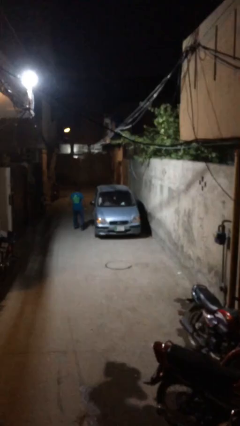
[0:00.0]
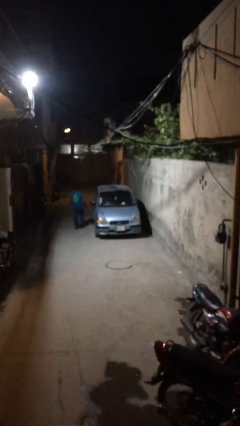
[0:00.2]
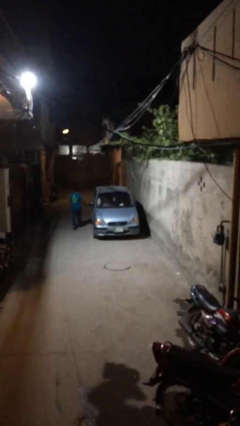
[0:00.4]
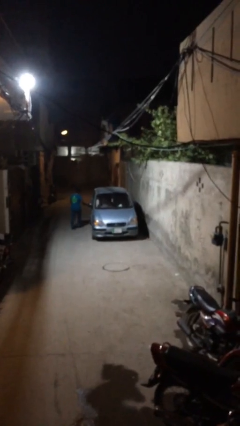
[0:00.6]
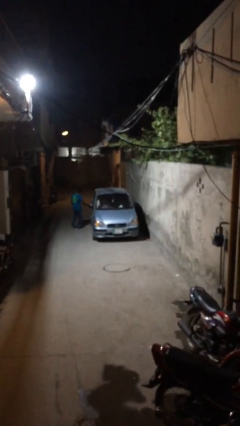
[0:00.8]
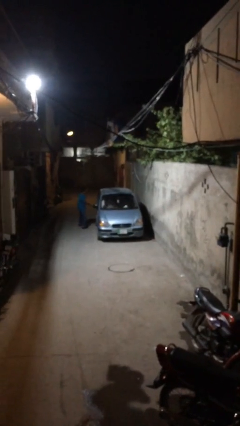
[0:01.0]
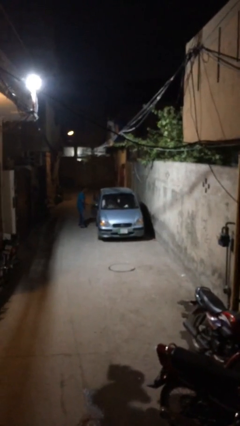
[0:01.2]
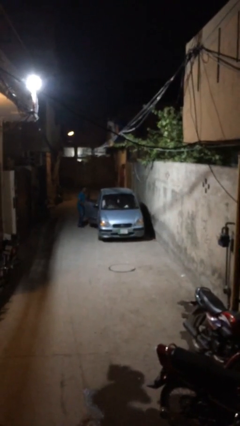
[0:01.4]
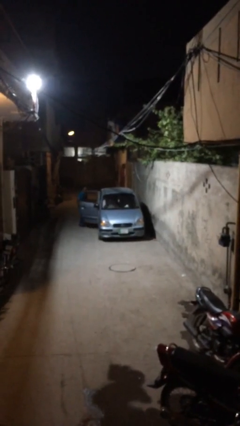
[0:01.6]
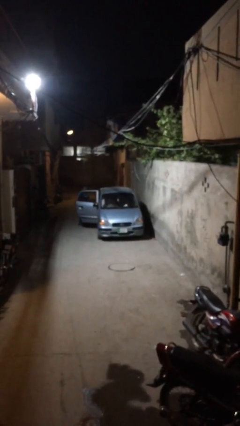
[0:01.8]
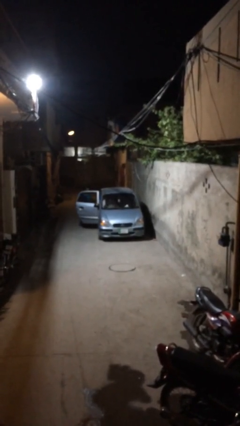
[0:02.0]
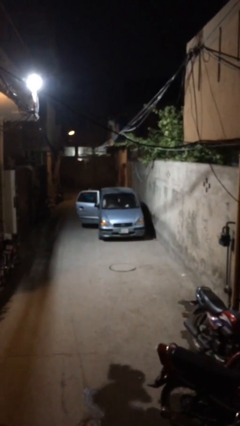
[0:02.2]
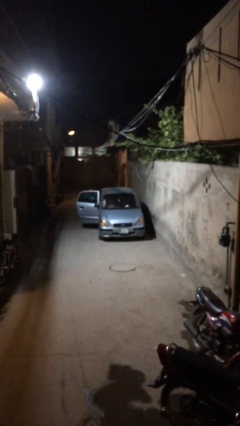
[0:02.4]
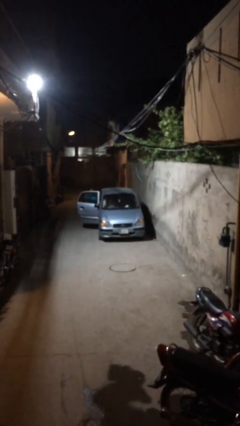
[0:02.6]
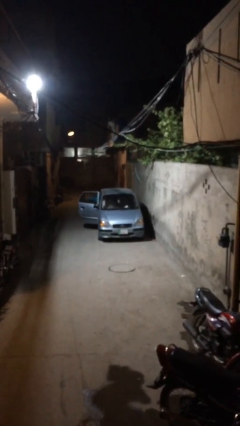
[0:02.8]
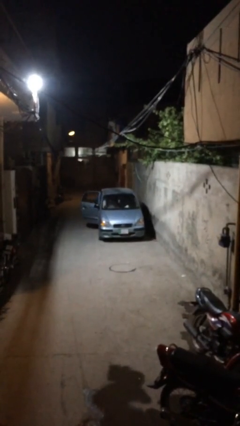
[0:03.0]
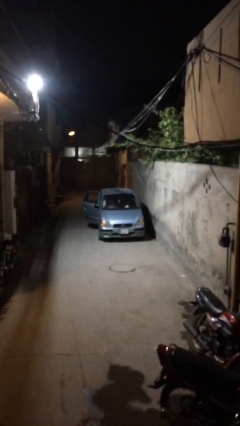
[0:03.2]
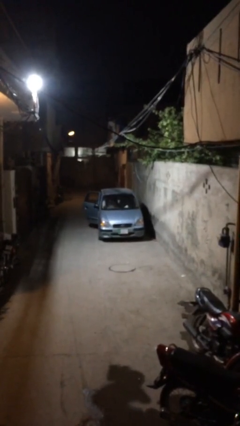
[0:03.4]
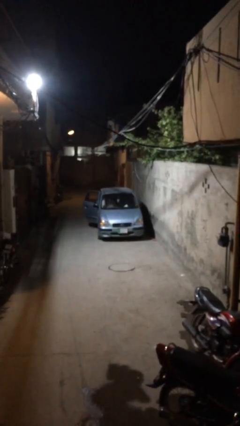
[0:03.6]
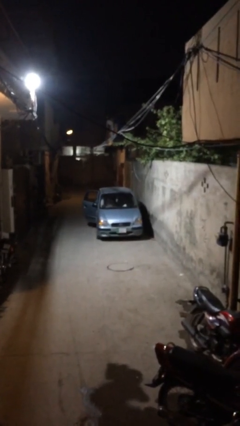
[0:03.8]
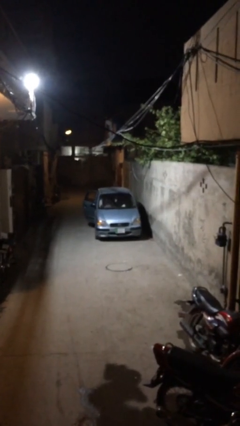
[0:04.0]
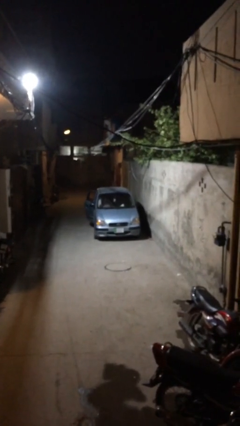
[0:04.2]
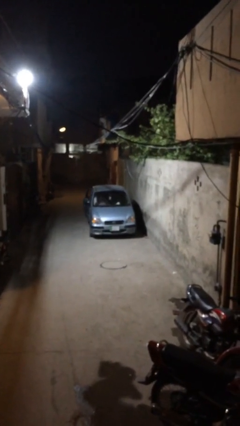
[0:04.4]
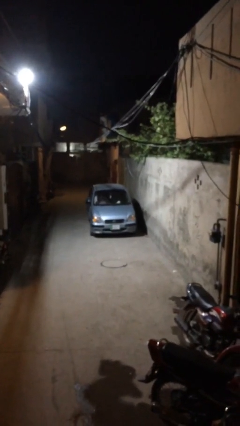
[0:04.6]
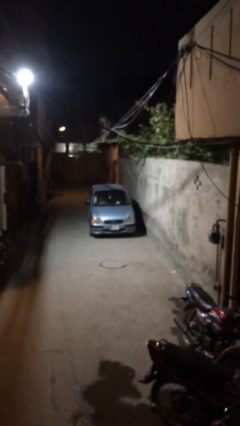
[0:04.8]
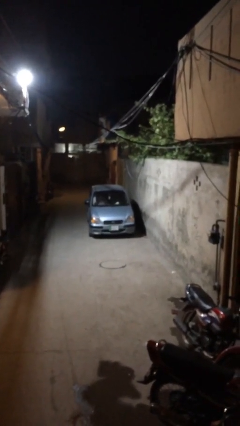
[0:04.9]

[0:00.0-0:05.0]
car picks up person

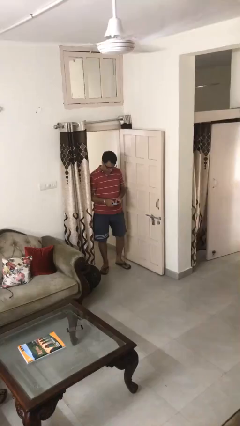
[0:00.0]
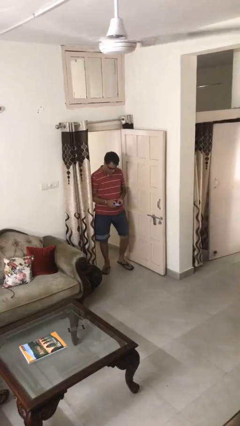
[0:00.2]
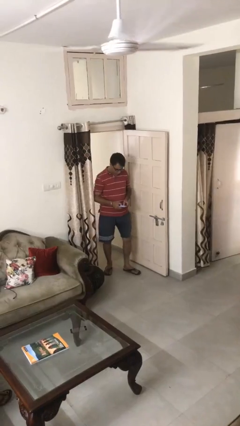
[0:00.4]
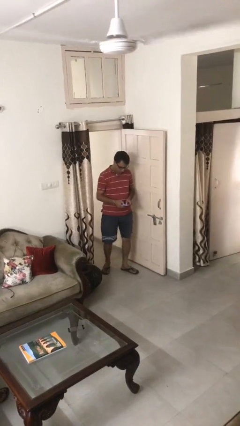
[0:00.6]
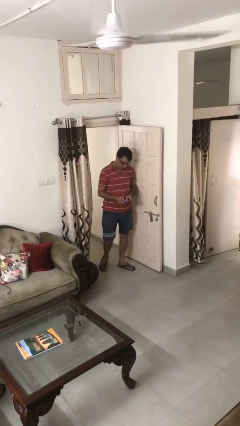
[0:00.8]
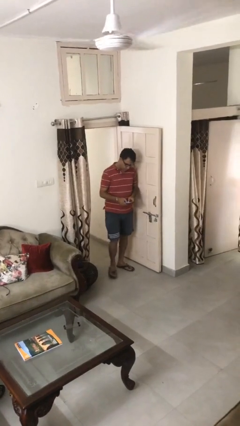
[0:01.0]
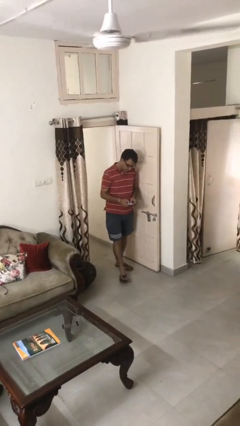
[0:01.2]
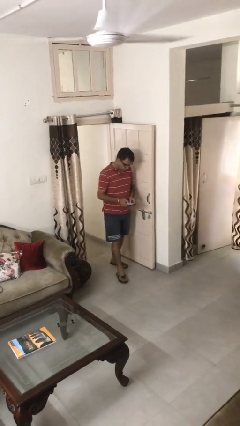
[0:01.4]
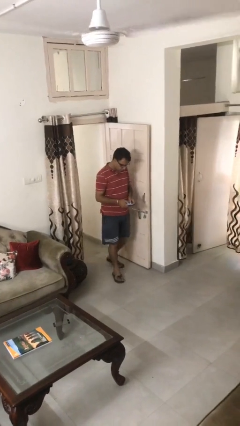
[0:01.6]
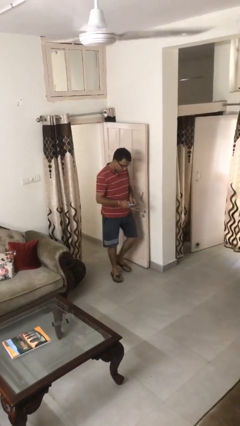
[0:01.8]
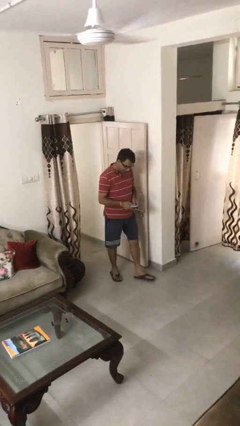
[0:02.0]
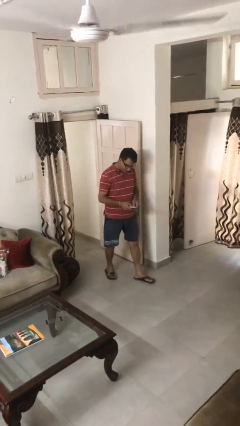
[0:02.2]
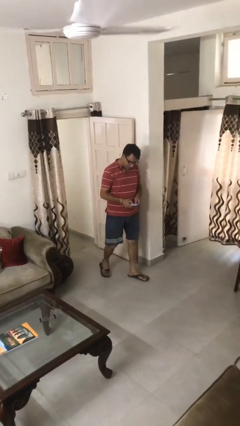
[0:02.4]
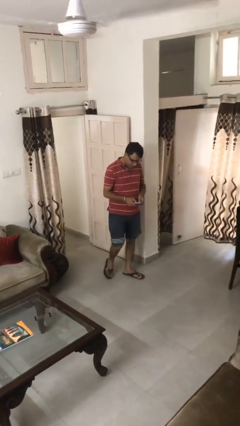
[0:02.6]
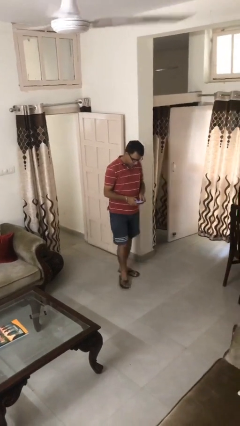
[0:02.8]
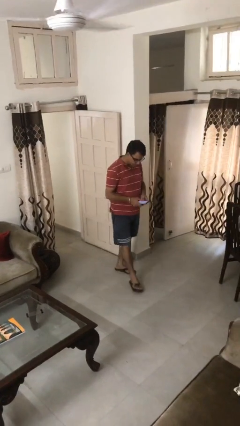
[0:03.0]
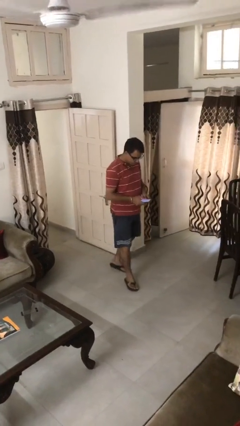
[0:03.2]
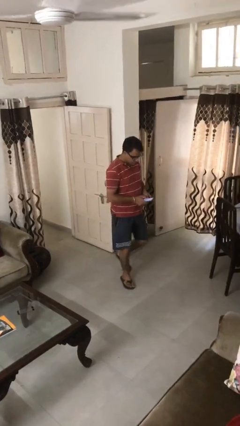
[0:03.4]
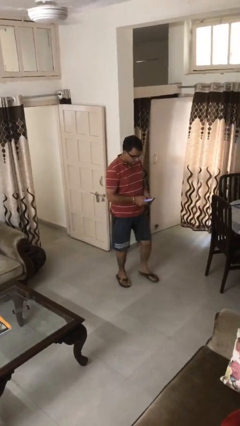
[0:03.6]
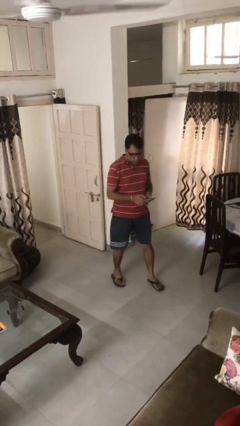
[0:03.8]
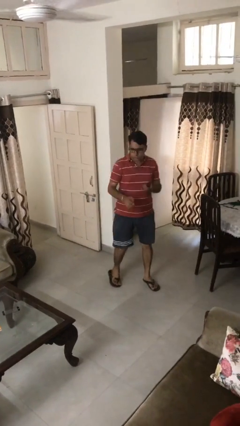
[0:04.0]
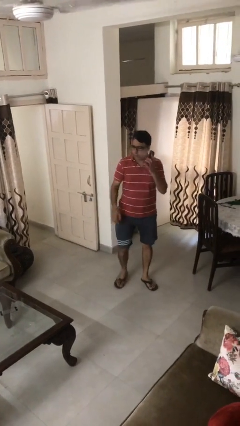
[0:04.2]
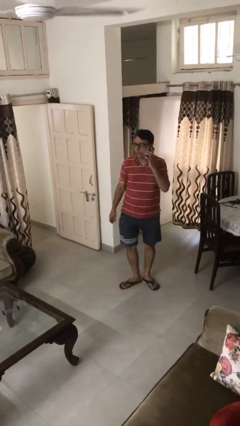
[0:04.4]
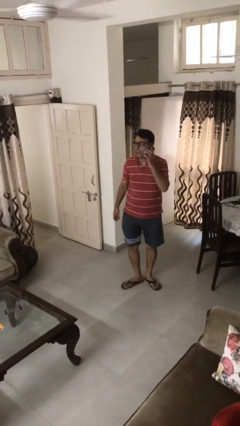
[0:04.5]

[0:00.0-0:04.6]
person texts on phone

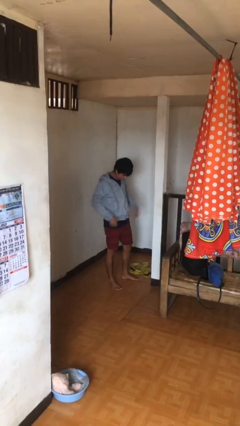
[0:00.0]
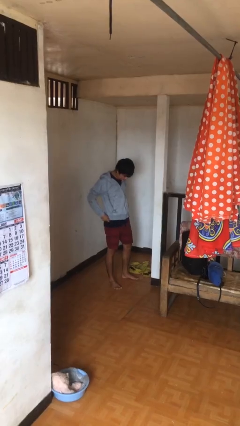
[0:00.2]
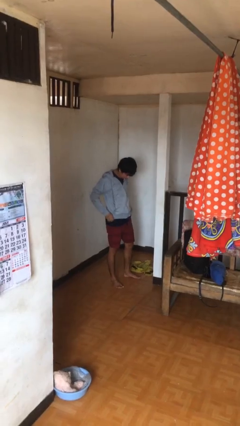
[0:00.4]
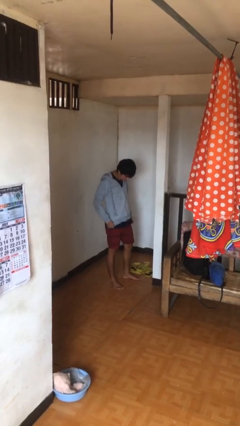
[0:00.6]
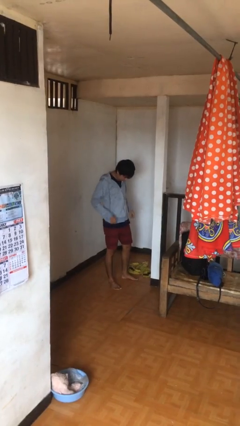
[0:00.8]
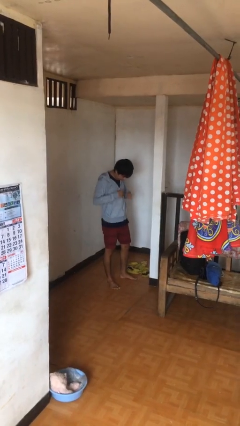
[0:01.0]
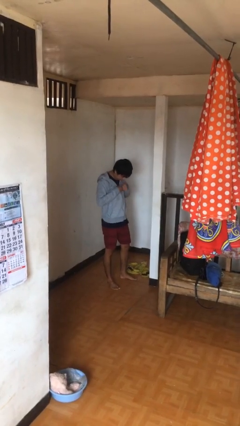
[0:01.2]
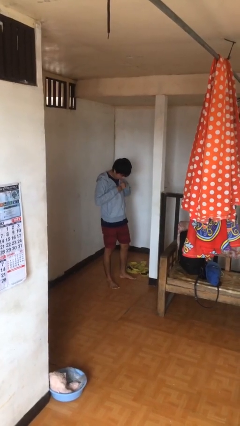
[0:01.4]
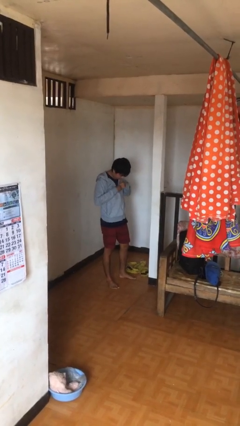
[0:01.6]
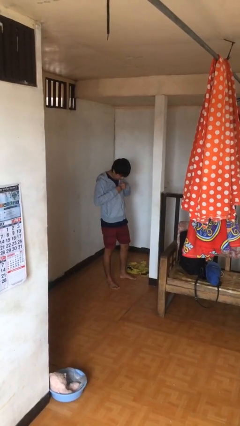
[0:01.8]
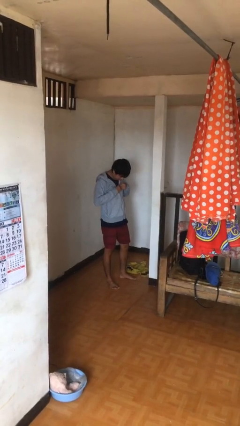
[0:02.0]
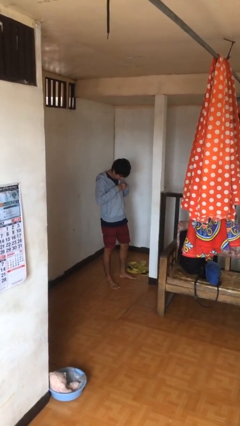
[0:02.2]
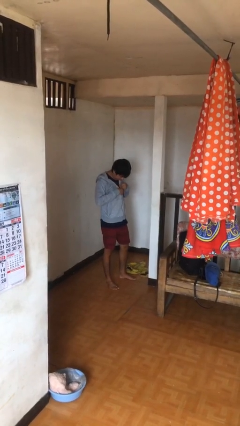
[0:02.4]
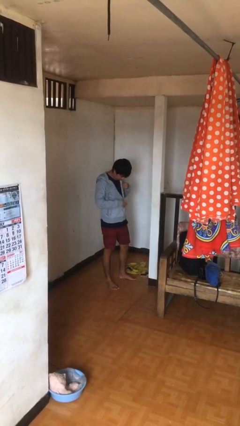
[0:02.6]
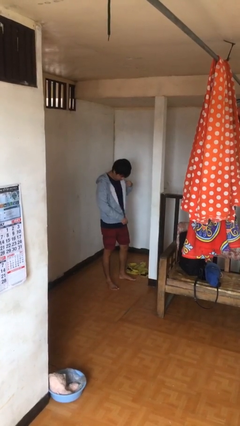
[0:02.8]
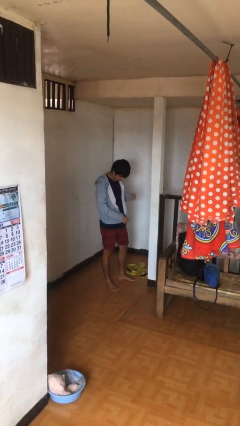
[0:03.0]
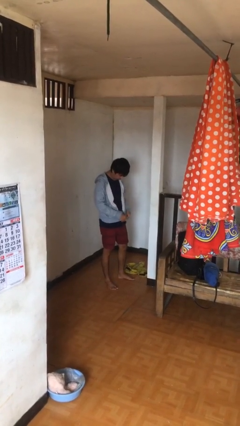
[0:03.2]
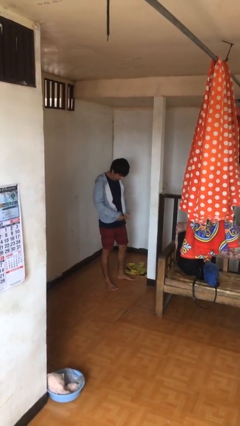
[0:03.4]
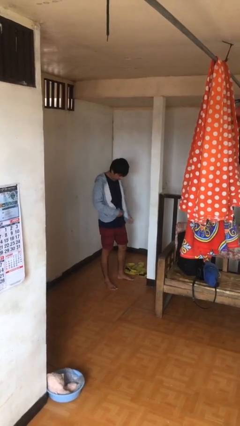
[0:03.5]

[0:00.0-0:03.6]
person unzips jacket

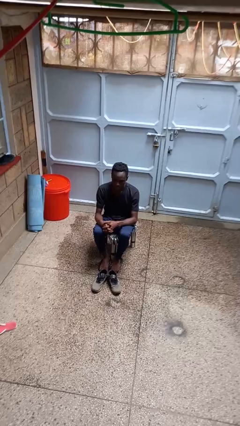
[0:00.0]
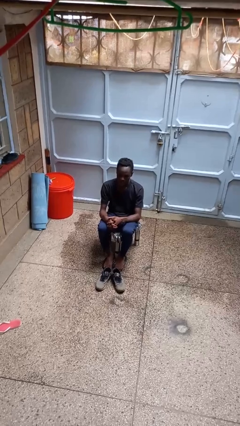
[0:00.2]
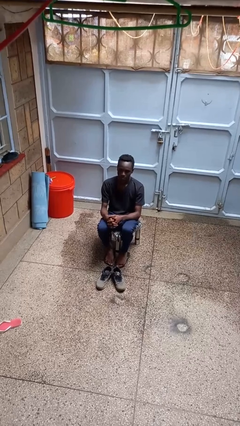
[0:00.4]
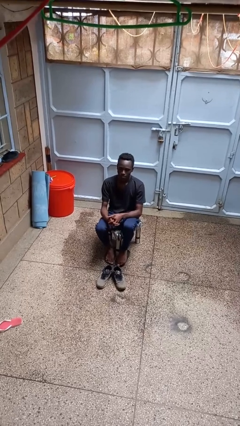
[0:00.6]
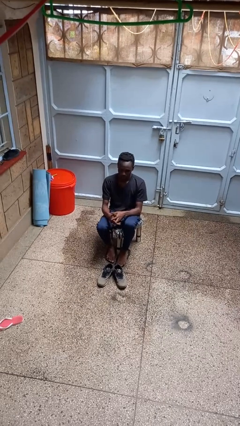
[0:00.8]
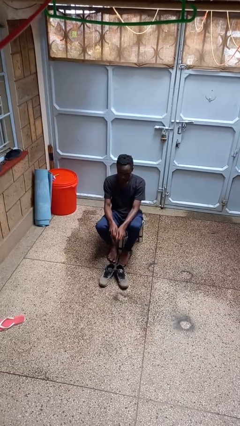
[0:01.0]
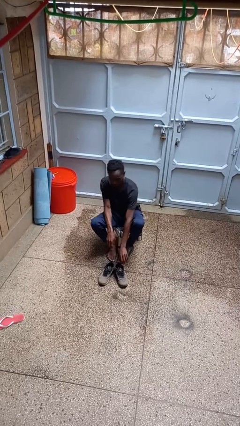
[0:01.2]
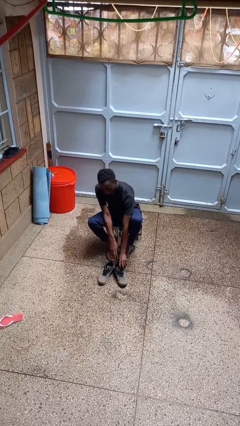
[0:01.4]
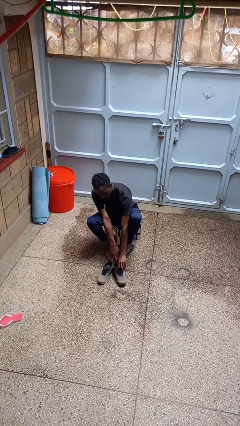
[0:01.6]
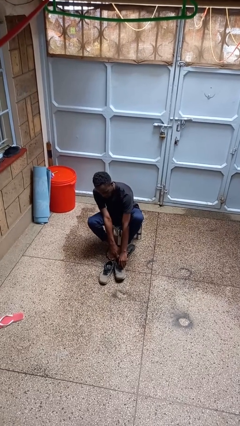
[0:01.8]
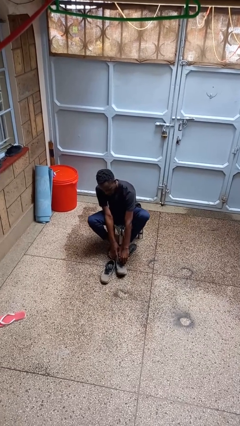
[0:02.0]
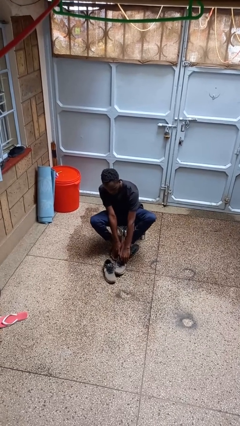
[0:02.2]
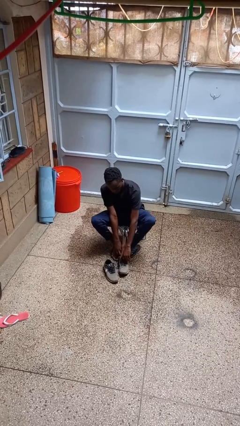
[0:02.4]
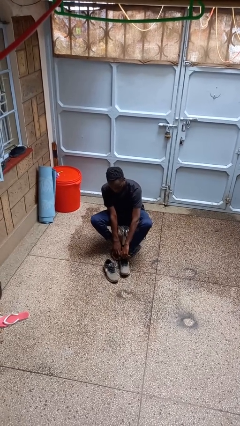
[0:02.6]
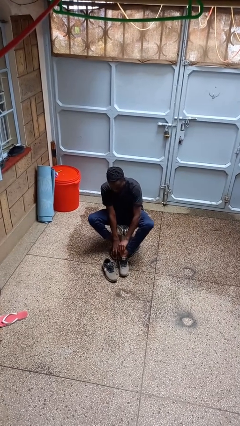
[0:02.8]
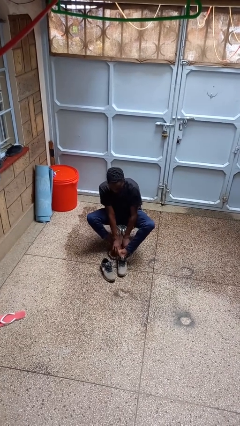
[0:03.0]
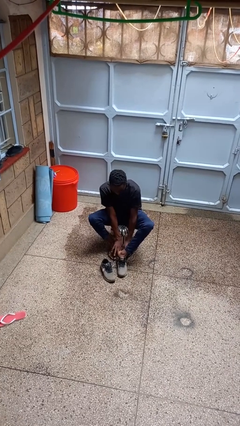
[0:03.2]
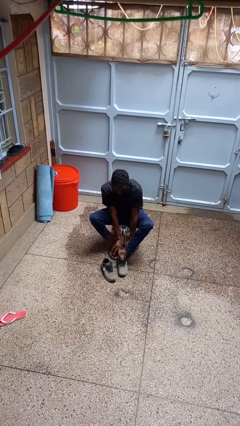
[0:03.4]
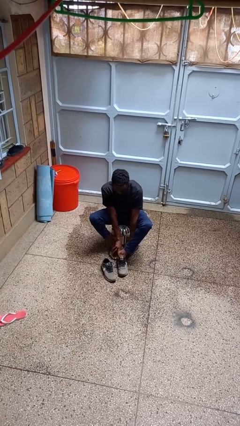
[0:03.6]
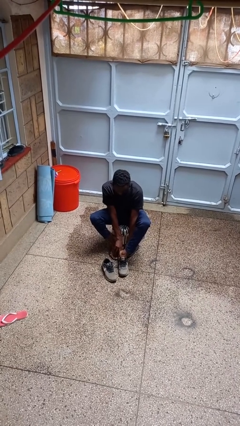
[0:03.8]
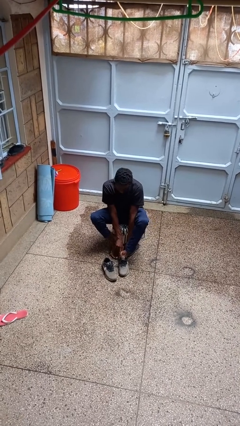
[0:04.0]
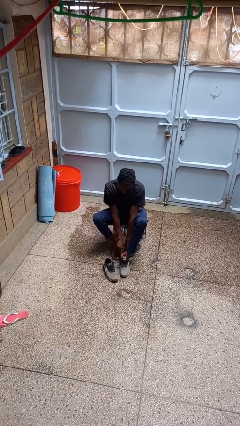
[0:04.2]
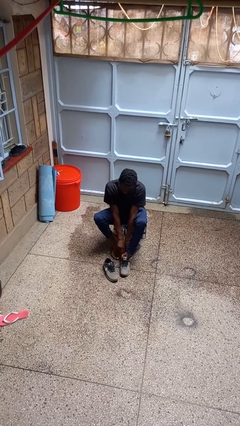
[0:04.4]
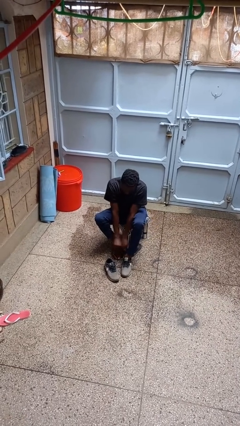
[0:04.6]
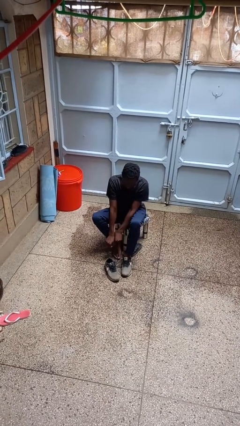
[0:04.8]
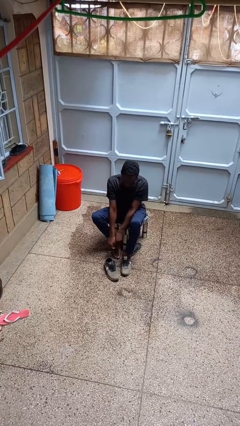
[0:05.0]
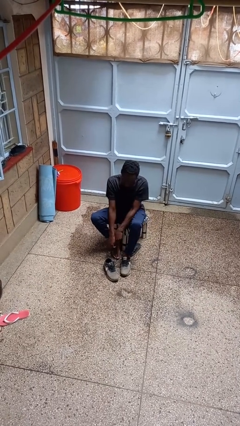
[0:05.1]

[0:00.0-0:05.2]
person puts on shoes
